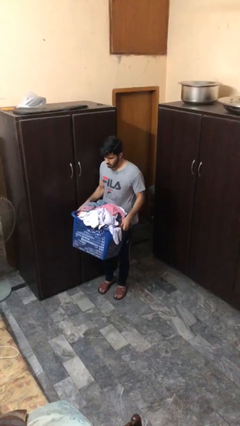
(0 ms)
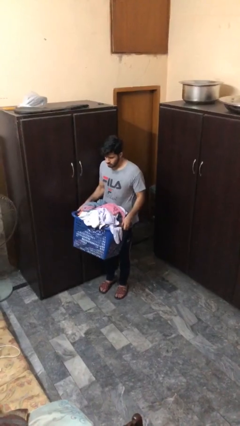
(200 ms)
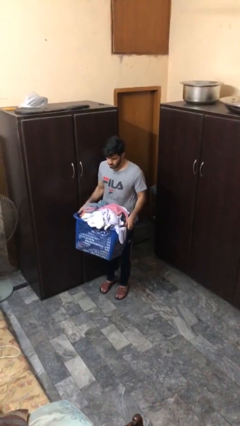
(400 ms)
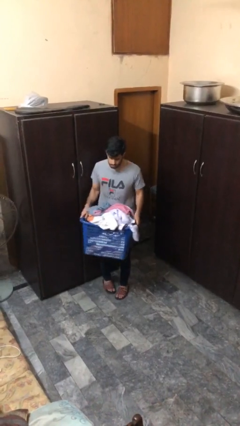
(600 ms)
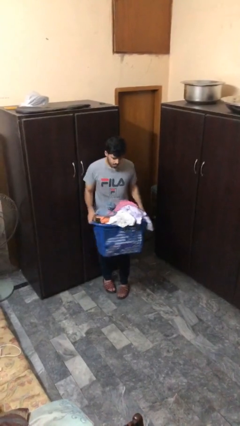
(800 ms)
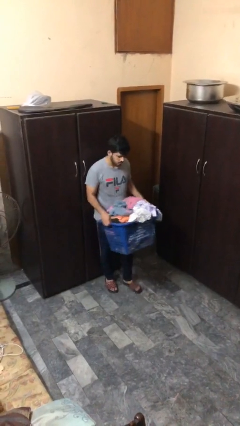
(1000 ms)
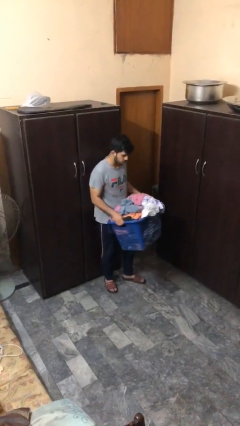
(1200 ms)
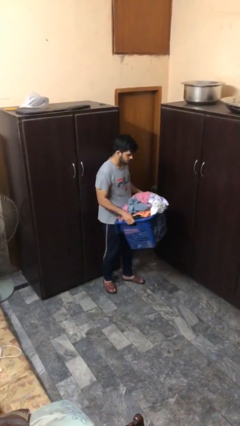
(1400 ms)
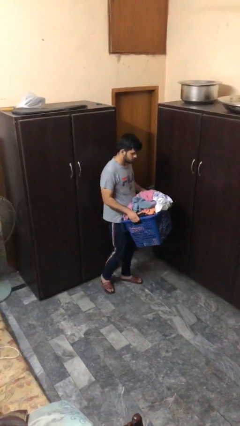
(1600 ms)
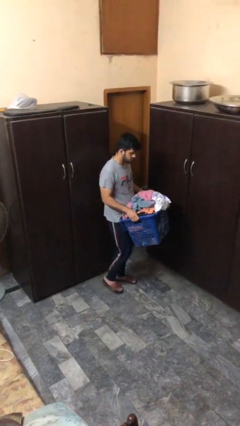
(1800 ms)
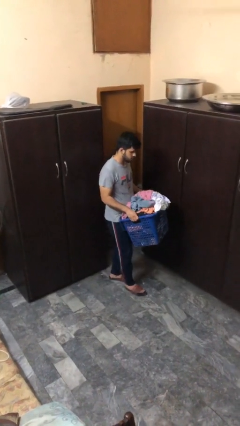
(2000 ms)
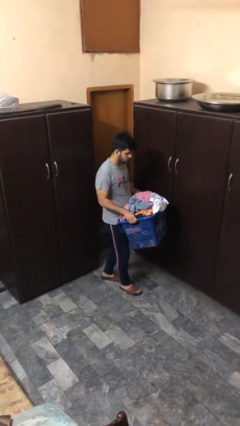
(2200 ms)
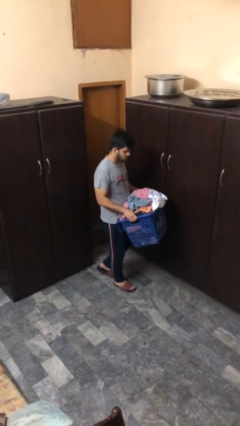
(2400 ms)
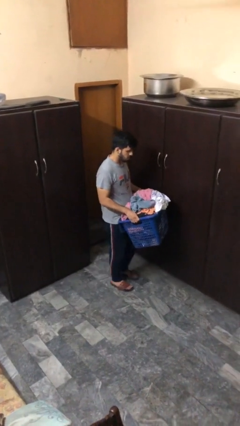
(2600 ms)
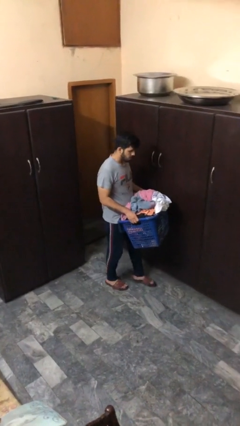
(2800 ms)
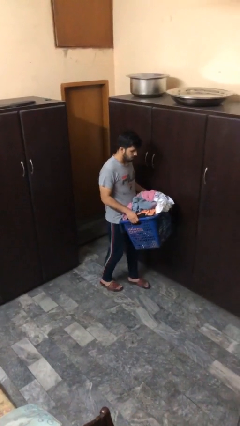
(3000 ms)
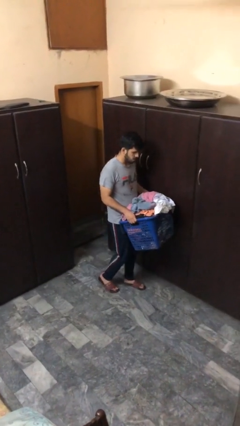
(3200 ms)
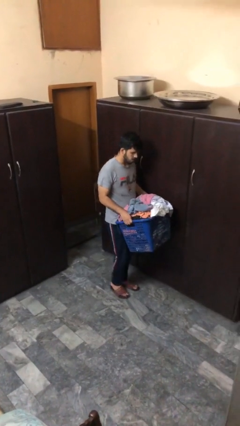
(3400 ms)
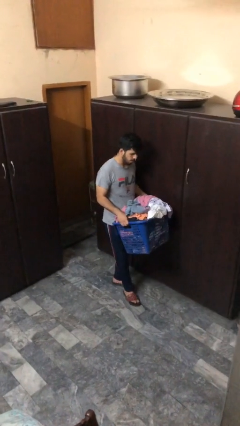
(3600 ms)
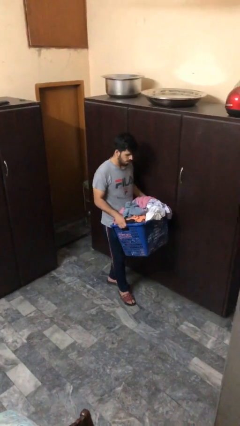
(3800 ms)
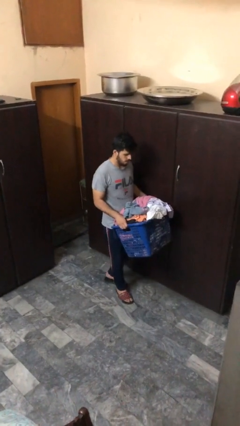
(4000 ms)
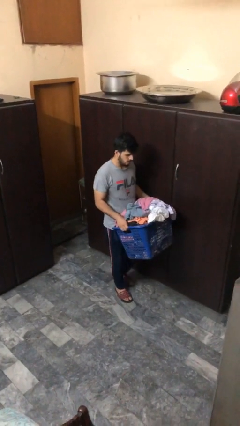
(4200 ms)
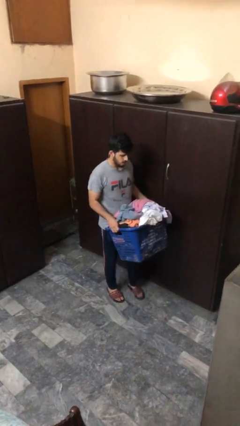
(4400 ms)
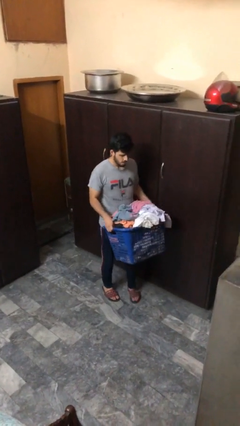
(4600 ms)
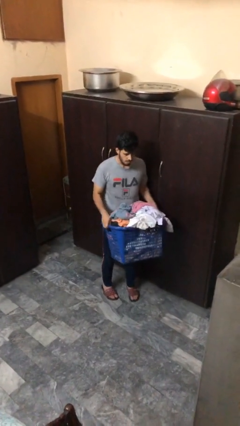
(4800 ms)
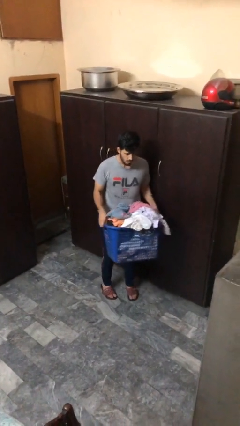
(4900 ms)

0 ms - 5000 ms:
person carries laundry basket

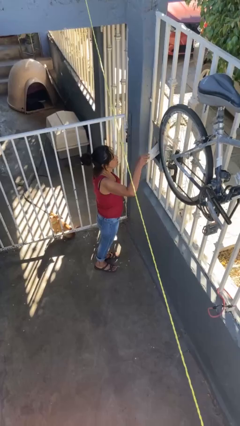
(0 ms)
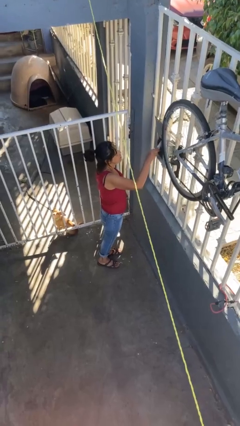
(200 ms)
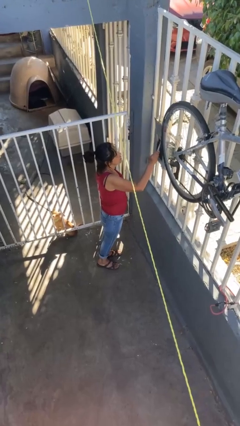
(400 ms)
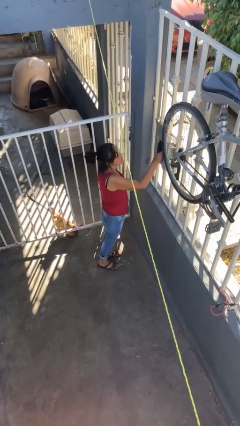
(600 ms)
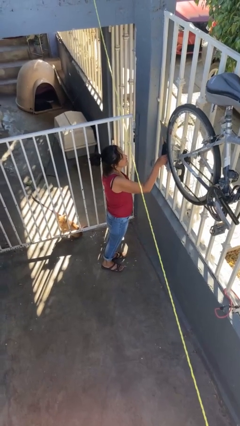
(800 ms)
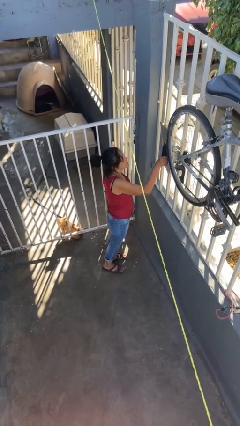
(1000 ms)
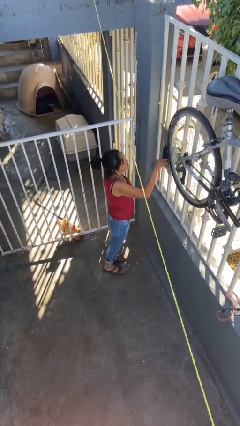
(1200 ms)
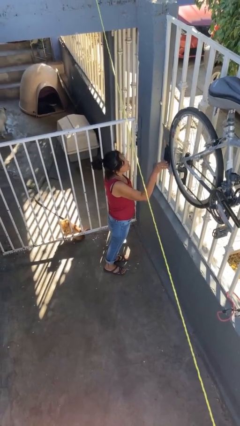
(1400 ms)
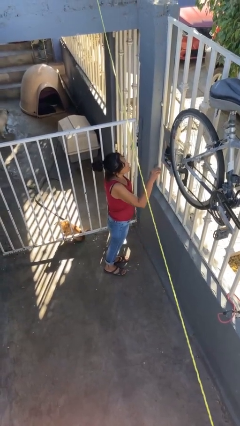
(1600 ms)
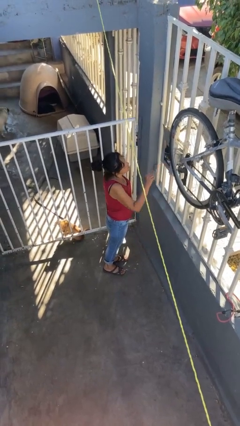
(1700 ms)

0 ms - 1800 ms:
person puts letters in mailbox

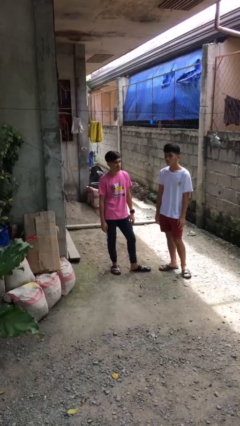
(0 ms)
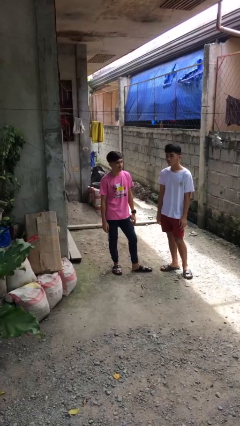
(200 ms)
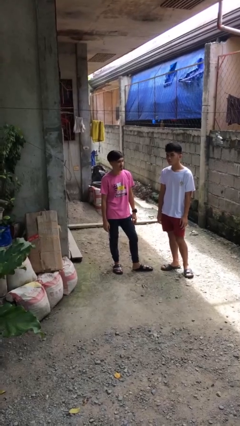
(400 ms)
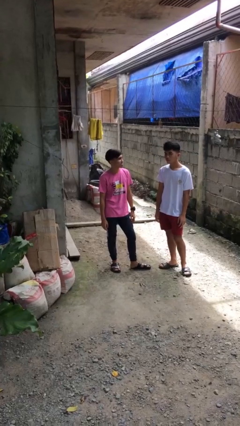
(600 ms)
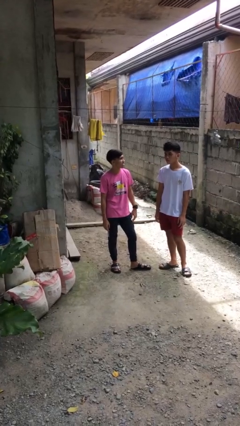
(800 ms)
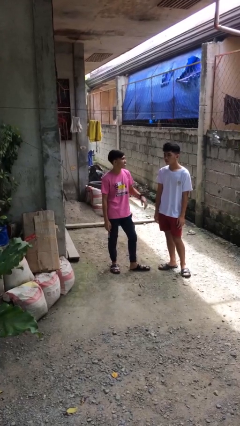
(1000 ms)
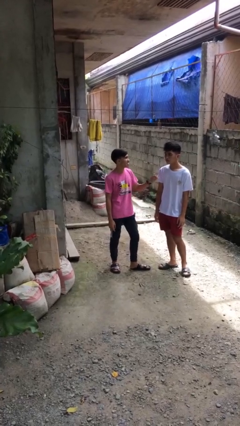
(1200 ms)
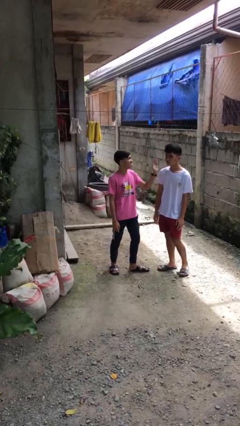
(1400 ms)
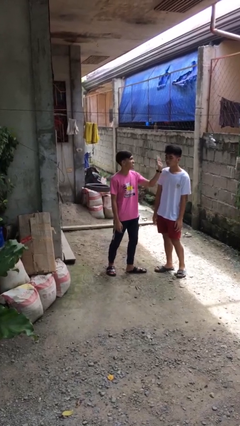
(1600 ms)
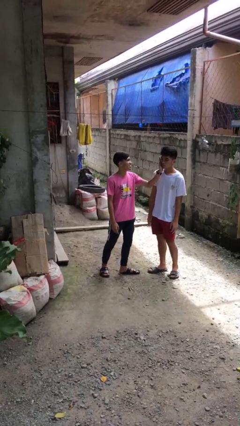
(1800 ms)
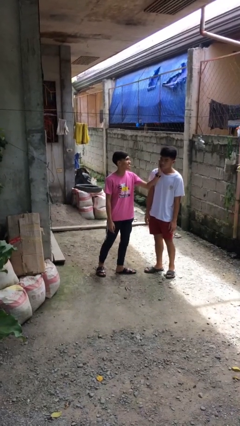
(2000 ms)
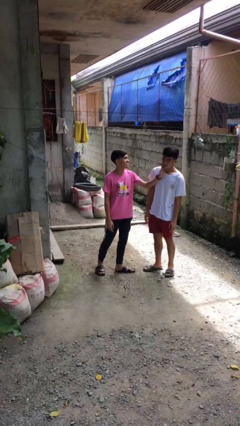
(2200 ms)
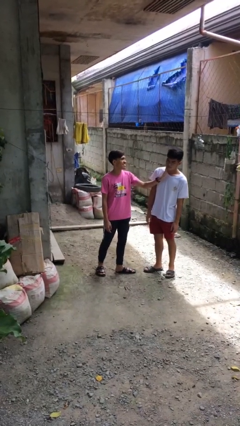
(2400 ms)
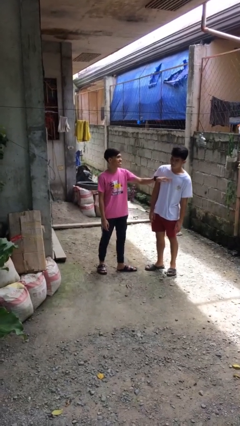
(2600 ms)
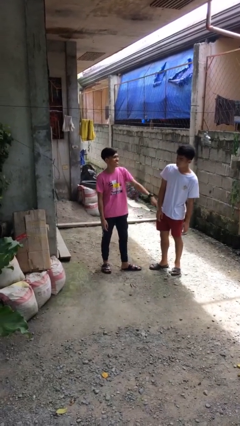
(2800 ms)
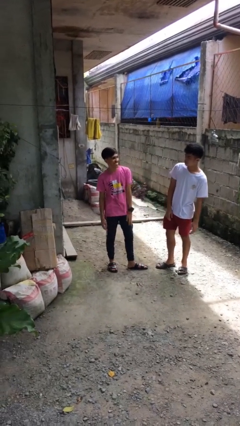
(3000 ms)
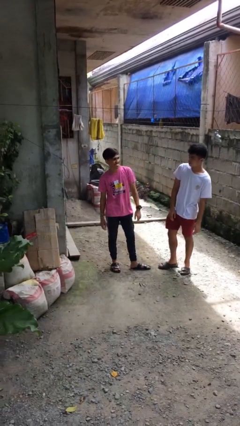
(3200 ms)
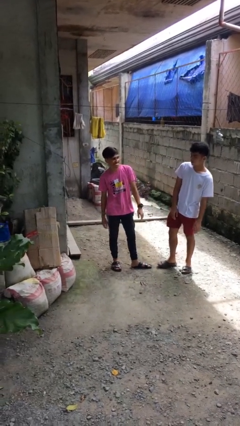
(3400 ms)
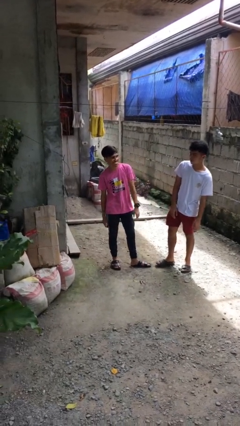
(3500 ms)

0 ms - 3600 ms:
person touches face of person

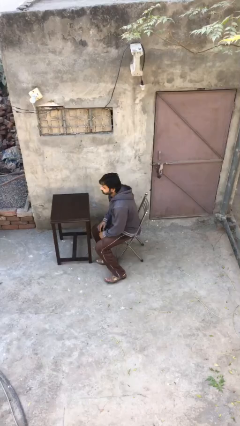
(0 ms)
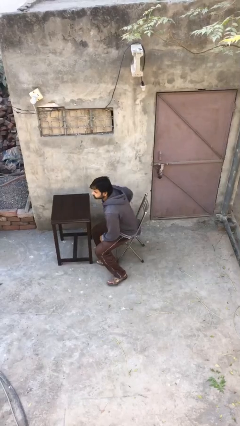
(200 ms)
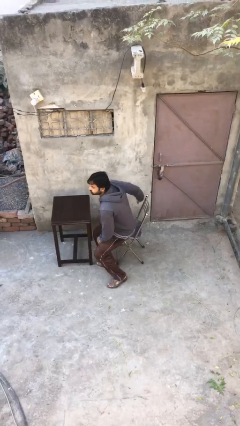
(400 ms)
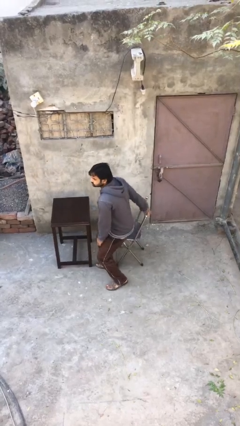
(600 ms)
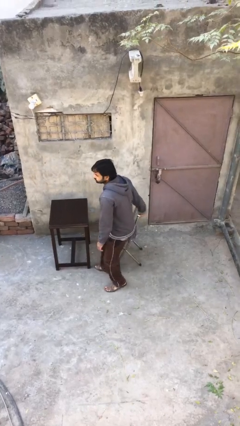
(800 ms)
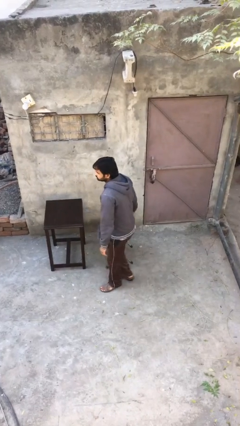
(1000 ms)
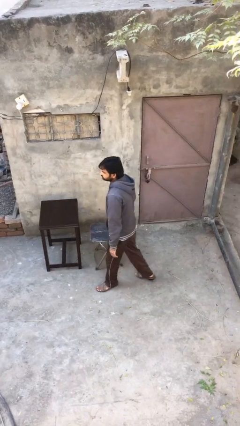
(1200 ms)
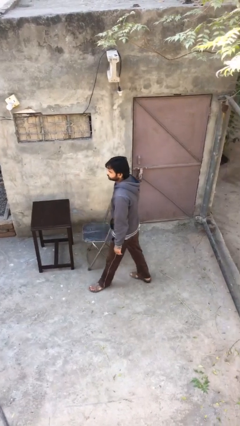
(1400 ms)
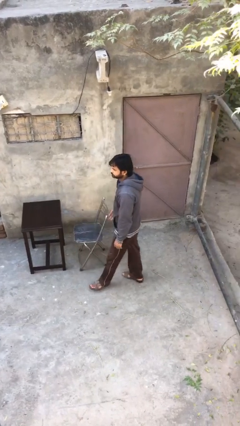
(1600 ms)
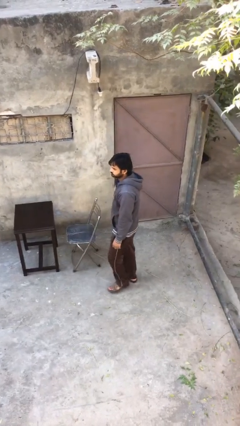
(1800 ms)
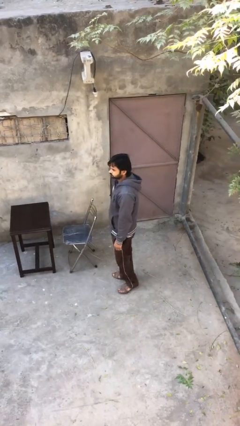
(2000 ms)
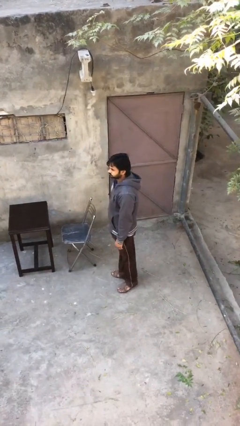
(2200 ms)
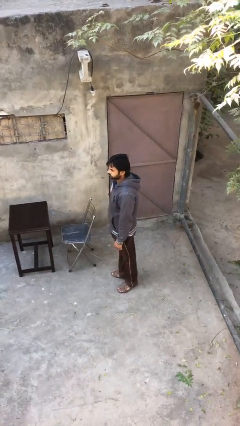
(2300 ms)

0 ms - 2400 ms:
person stands up

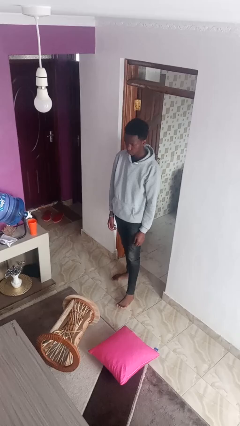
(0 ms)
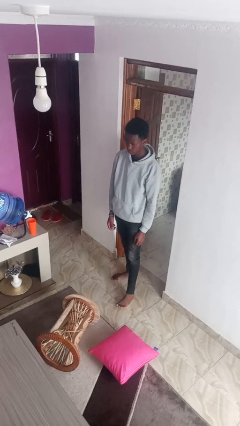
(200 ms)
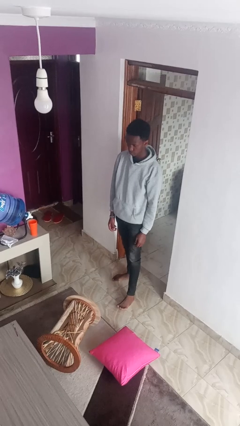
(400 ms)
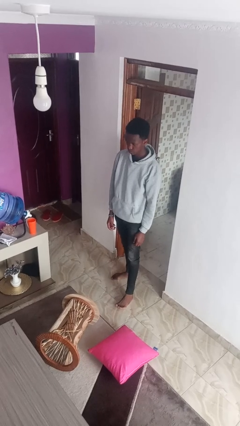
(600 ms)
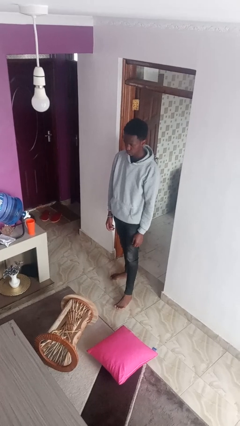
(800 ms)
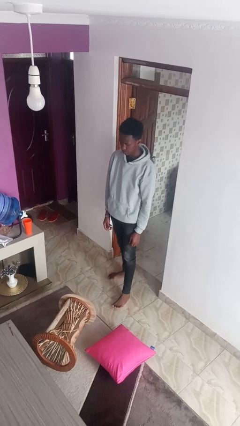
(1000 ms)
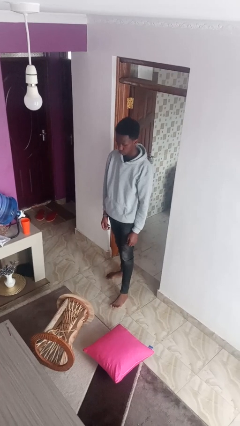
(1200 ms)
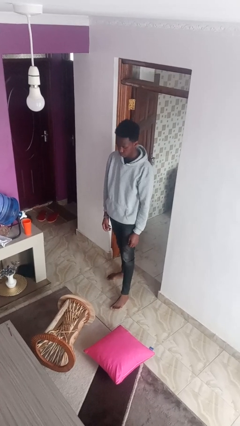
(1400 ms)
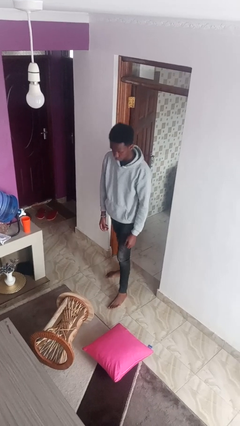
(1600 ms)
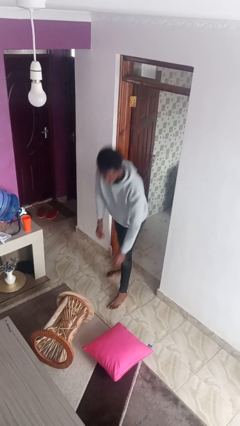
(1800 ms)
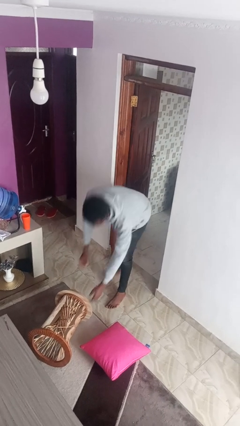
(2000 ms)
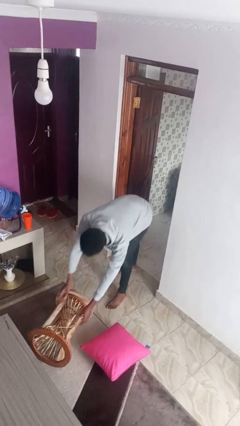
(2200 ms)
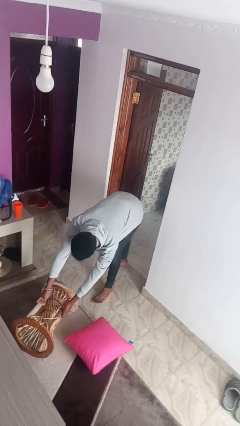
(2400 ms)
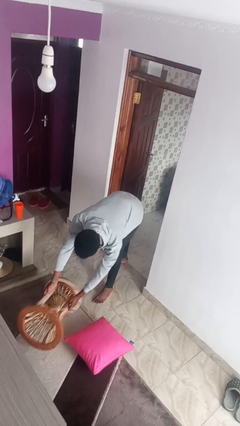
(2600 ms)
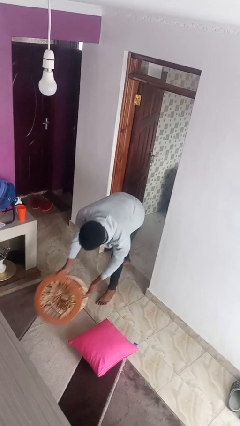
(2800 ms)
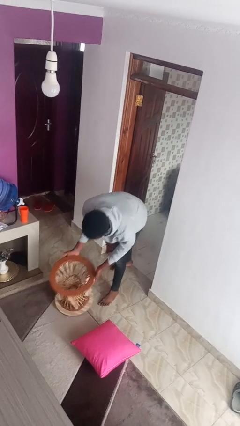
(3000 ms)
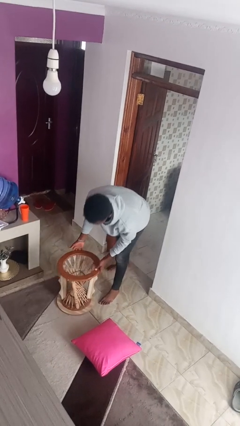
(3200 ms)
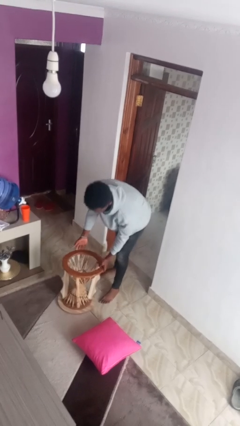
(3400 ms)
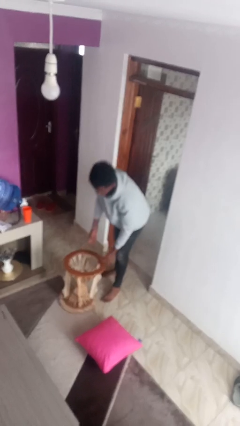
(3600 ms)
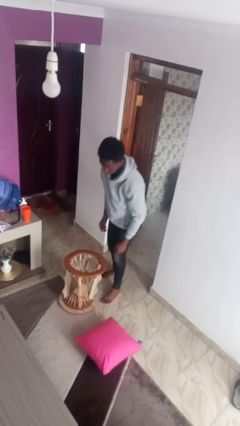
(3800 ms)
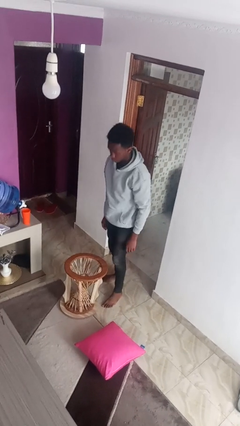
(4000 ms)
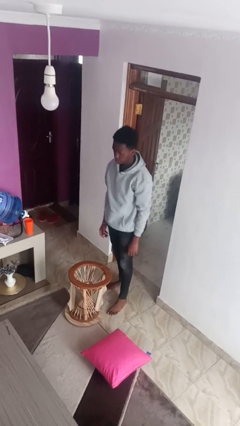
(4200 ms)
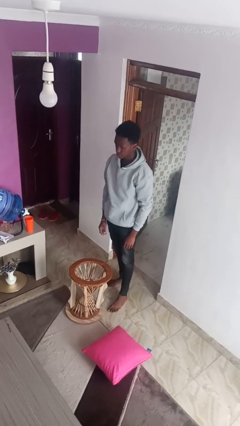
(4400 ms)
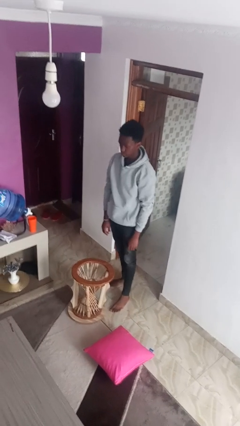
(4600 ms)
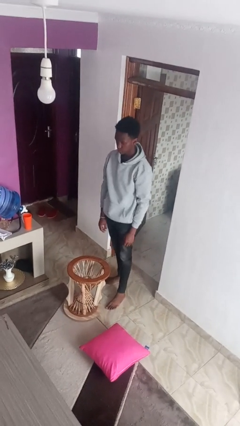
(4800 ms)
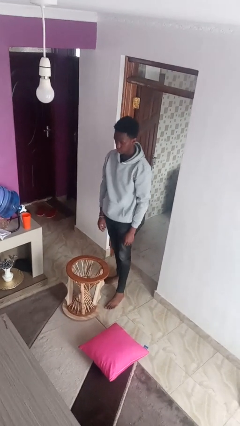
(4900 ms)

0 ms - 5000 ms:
person sets upright furniture
